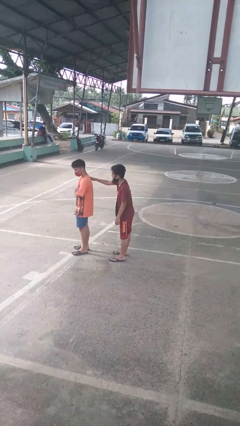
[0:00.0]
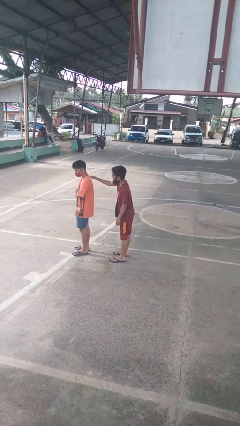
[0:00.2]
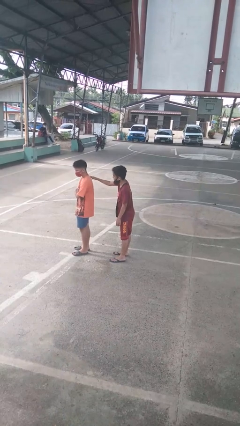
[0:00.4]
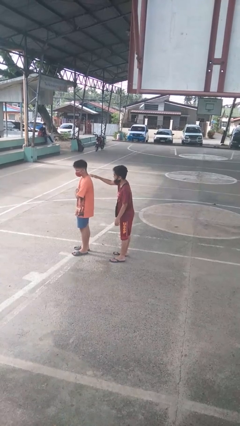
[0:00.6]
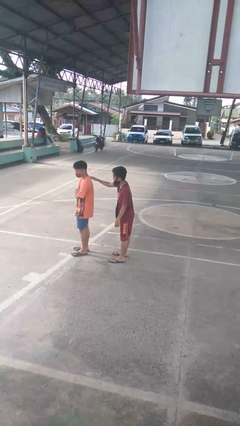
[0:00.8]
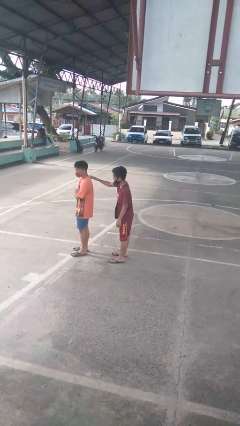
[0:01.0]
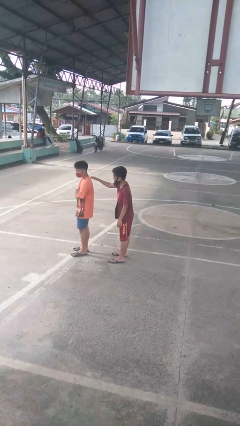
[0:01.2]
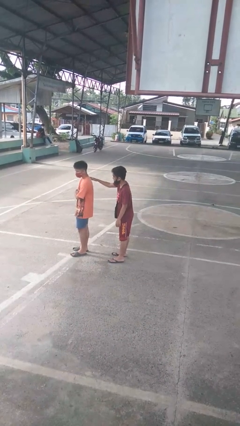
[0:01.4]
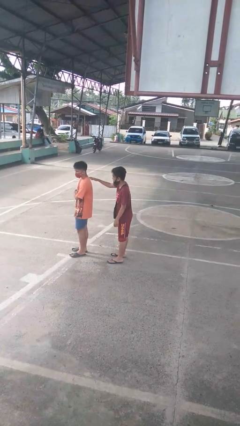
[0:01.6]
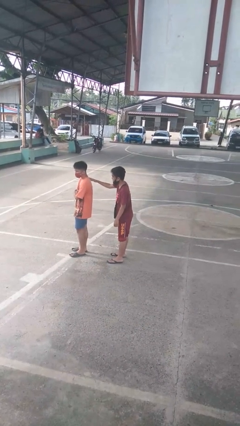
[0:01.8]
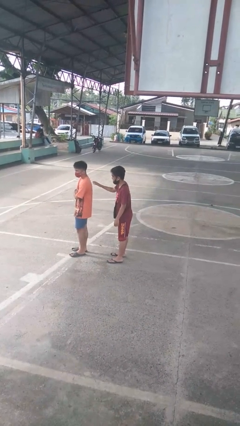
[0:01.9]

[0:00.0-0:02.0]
person touches back of person

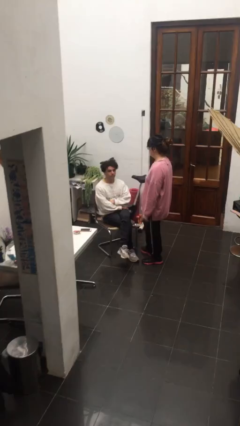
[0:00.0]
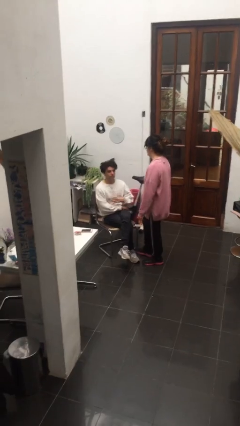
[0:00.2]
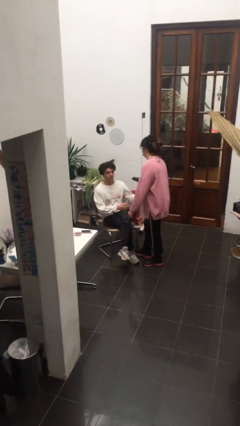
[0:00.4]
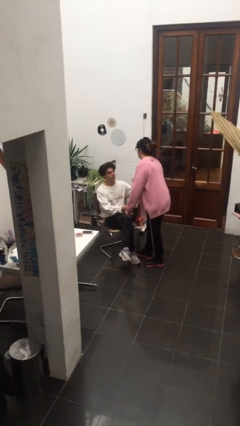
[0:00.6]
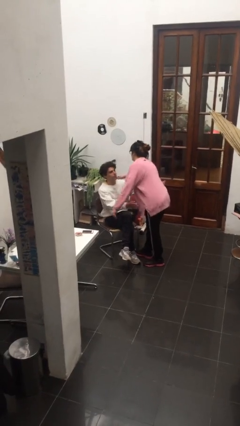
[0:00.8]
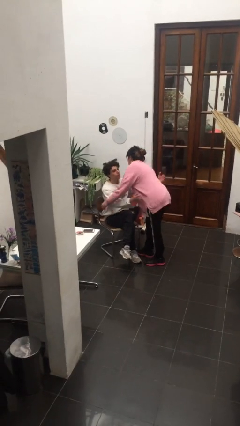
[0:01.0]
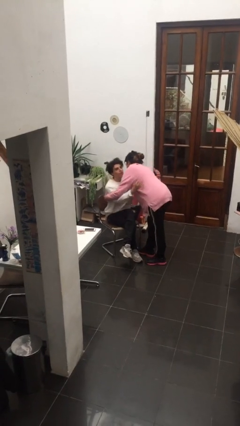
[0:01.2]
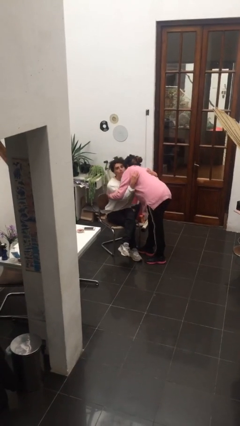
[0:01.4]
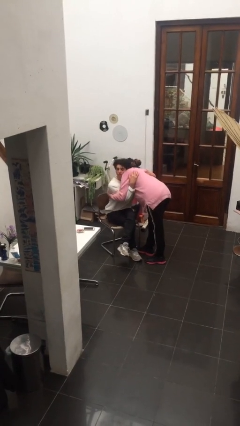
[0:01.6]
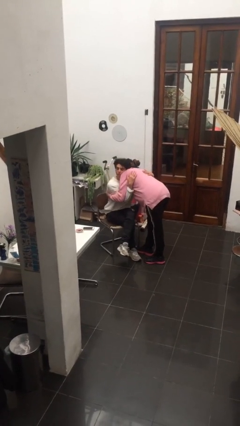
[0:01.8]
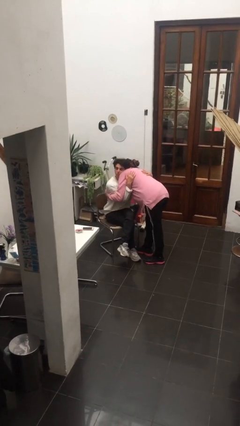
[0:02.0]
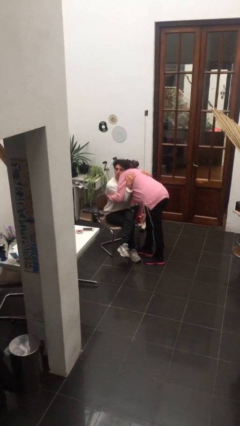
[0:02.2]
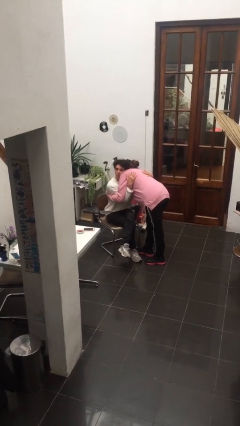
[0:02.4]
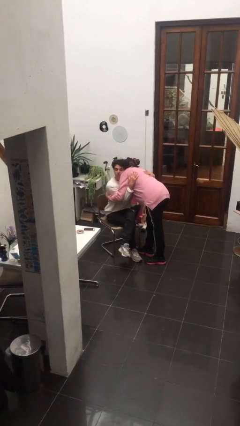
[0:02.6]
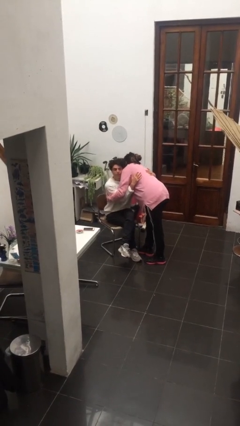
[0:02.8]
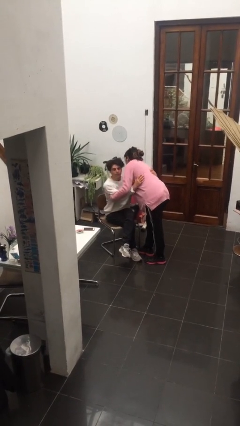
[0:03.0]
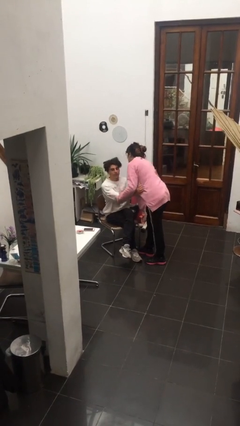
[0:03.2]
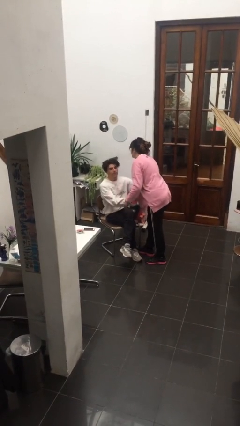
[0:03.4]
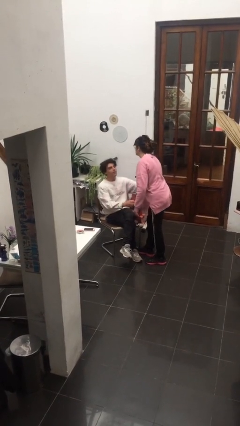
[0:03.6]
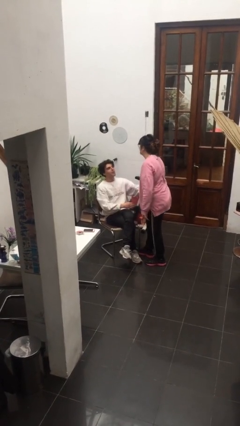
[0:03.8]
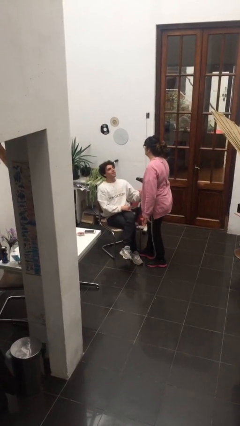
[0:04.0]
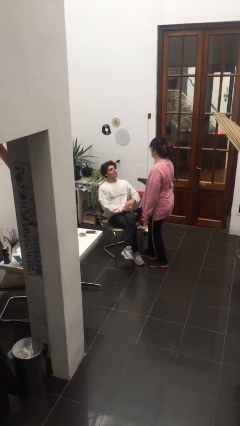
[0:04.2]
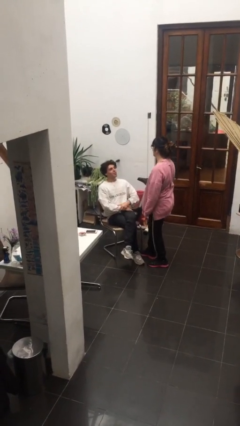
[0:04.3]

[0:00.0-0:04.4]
person embraces person

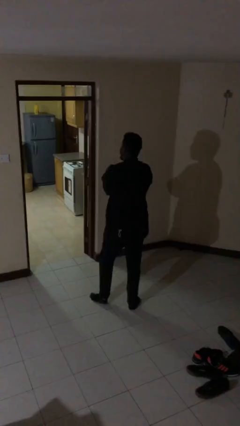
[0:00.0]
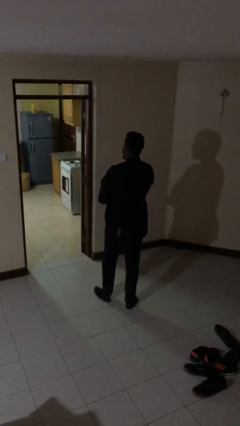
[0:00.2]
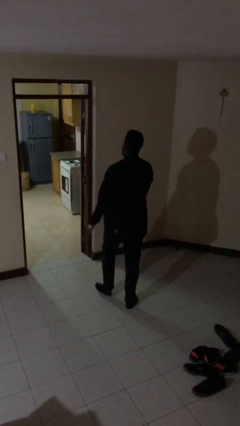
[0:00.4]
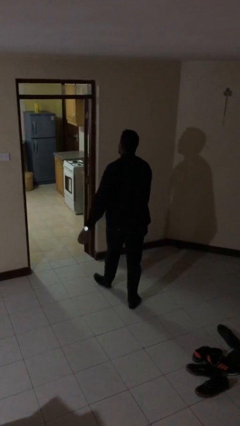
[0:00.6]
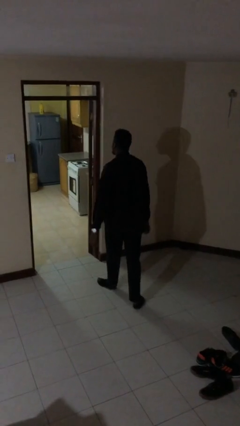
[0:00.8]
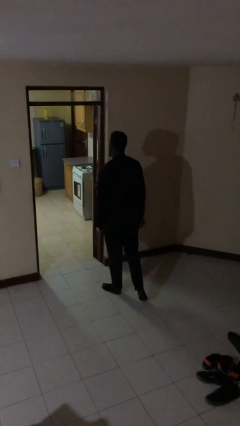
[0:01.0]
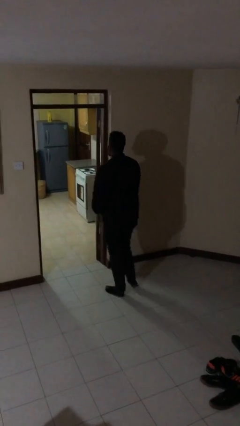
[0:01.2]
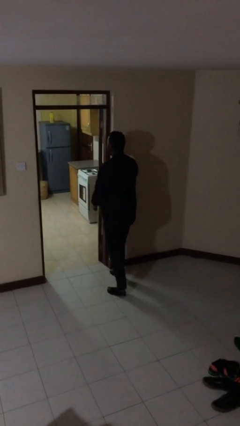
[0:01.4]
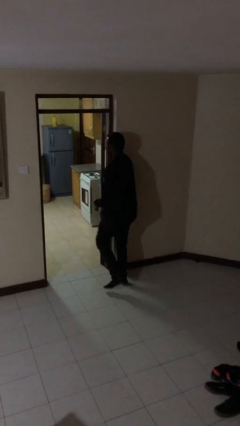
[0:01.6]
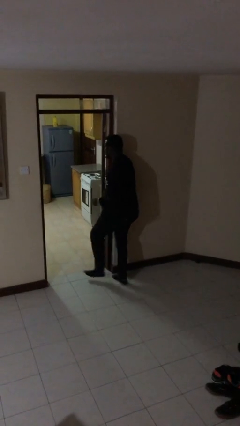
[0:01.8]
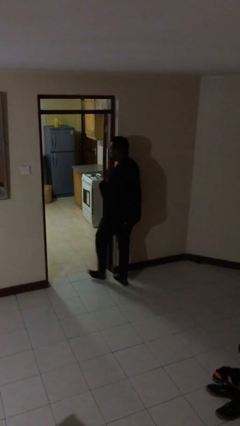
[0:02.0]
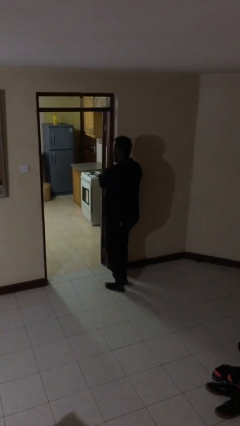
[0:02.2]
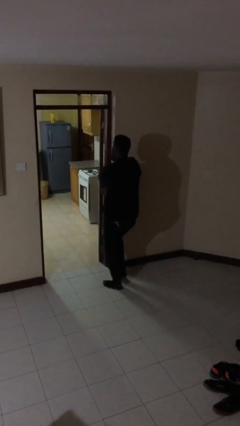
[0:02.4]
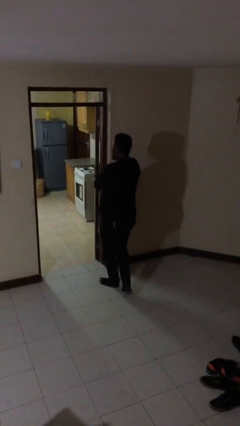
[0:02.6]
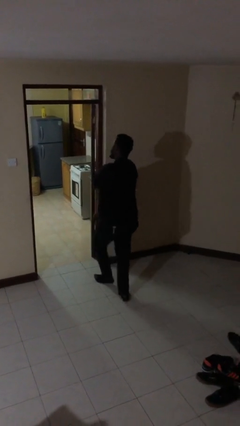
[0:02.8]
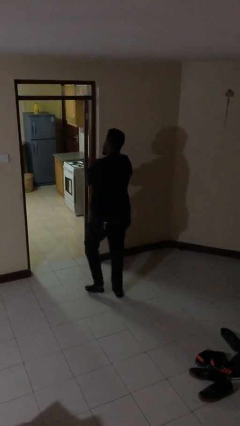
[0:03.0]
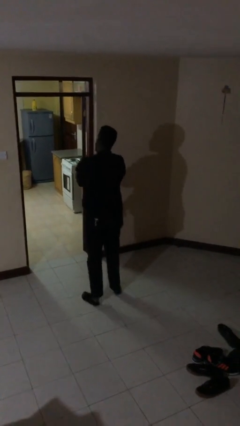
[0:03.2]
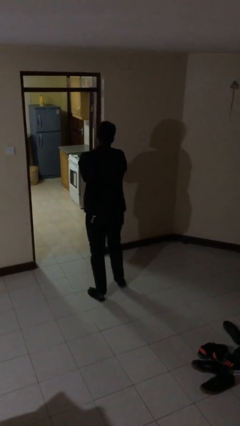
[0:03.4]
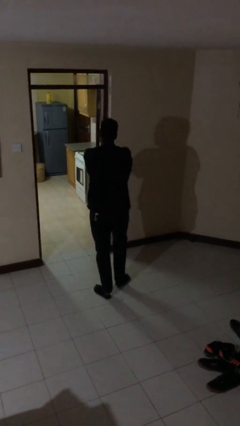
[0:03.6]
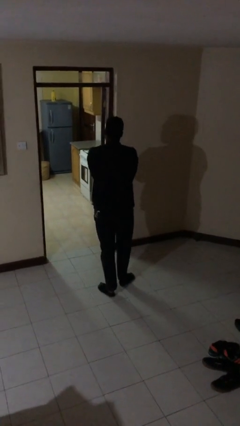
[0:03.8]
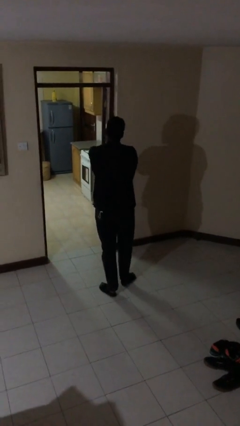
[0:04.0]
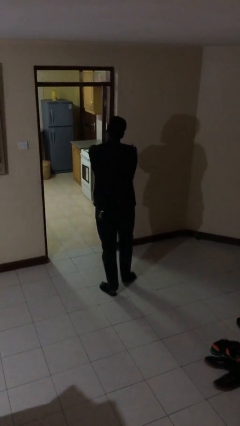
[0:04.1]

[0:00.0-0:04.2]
person bumps into wall

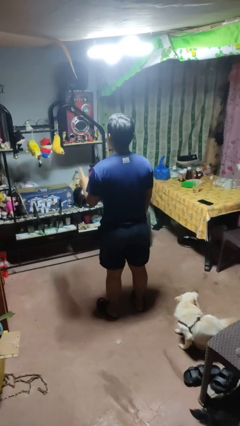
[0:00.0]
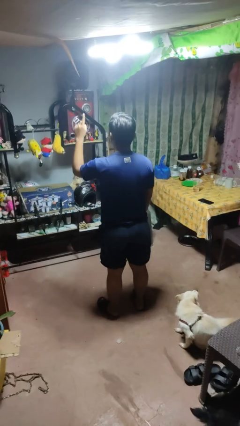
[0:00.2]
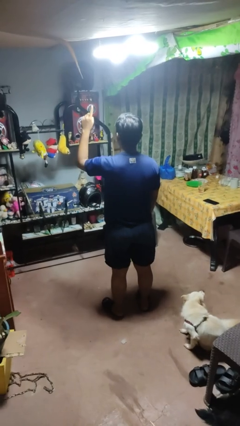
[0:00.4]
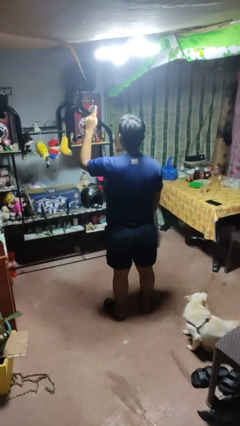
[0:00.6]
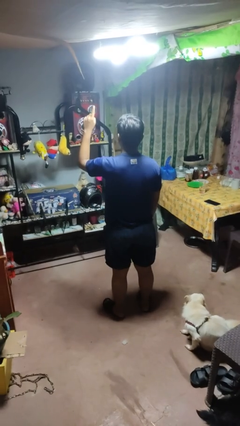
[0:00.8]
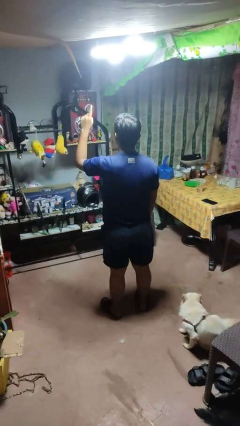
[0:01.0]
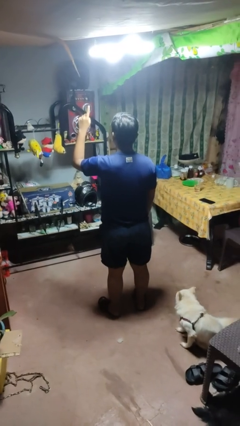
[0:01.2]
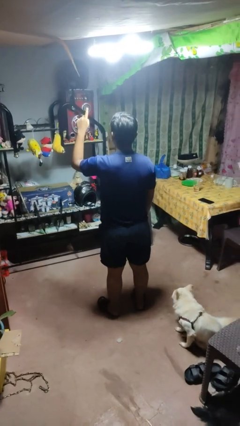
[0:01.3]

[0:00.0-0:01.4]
person gestures number one

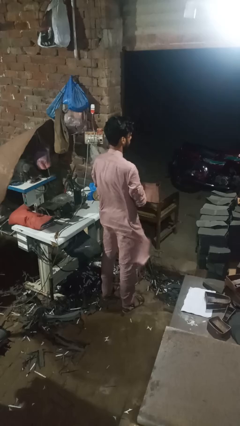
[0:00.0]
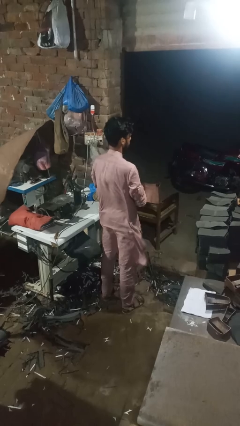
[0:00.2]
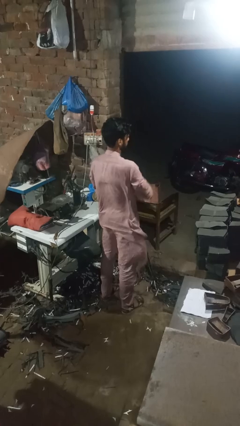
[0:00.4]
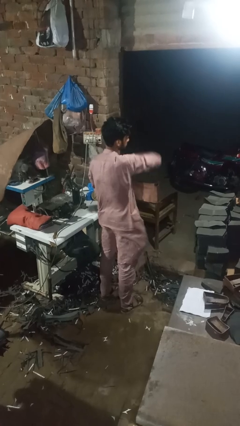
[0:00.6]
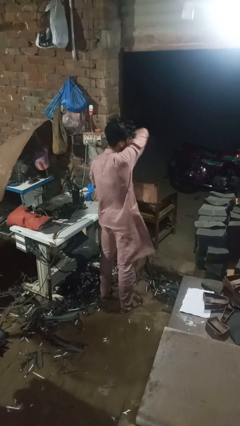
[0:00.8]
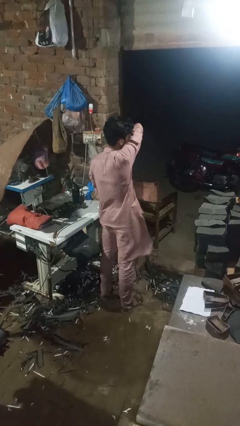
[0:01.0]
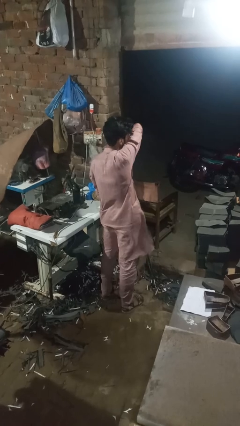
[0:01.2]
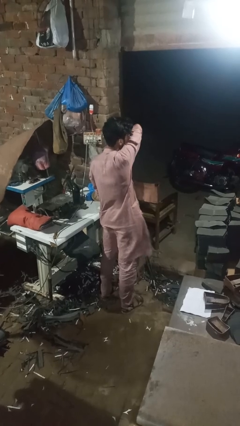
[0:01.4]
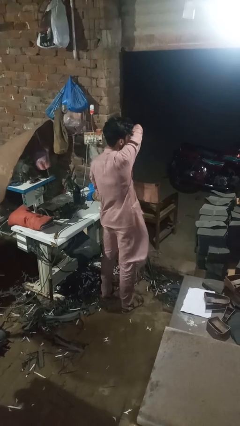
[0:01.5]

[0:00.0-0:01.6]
person sneezes into arm

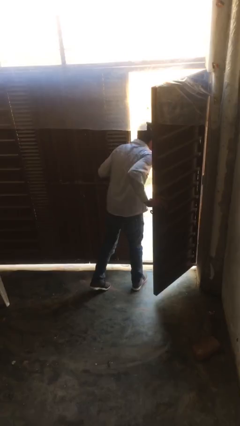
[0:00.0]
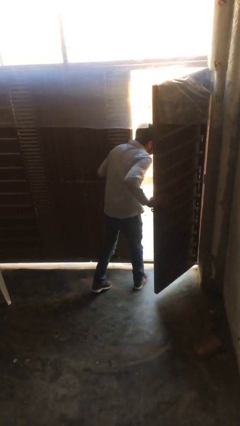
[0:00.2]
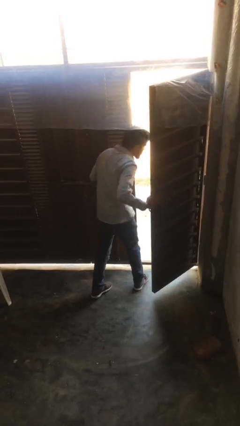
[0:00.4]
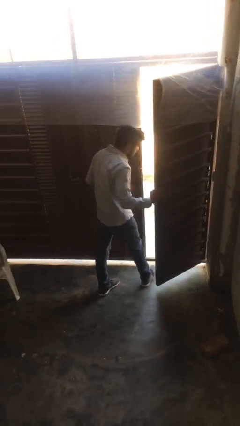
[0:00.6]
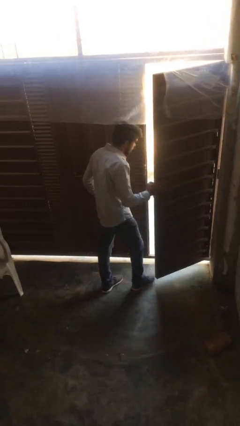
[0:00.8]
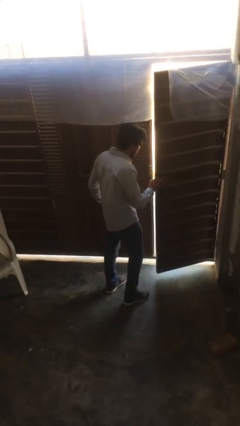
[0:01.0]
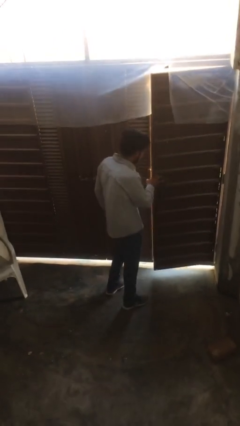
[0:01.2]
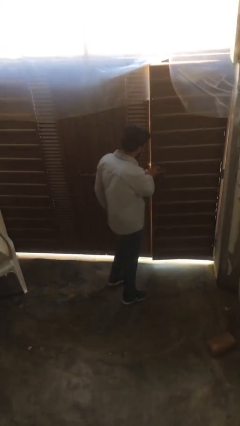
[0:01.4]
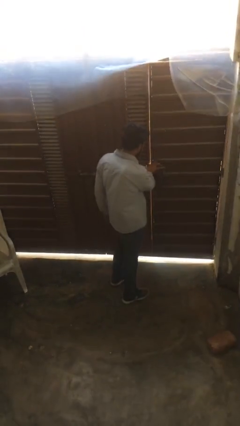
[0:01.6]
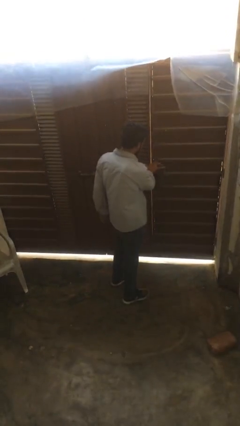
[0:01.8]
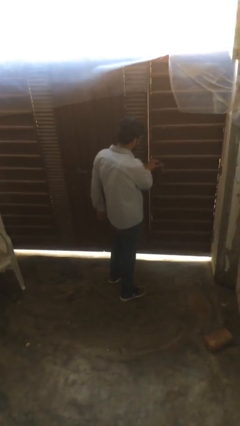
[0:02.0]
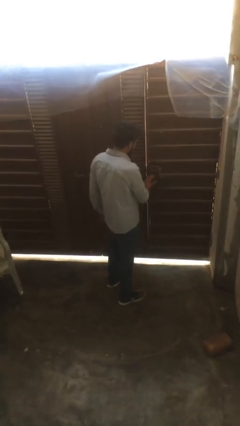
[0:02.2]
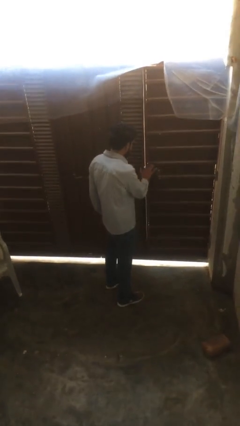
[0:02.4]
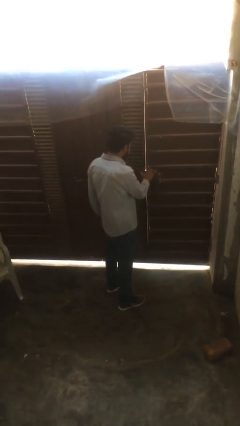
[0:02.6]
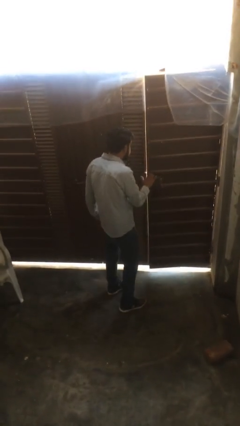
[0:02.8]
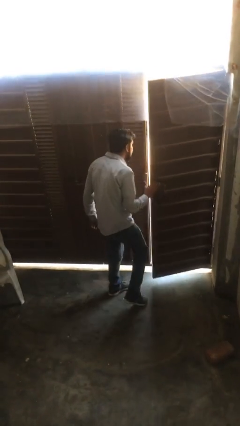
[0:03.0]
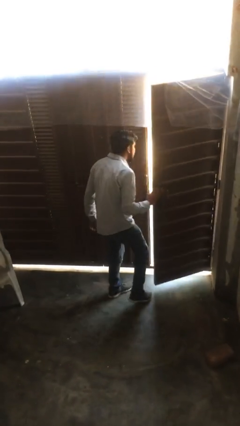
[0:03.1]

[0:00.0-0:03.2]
person closes facility door
